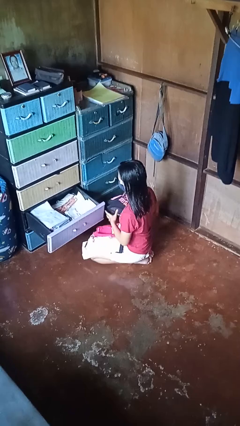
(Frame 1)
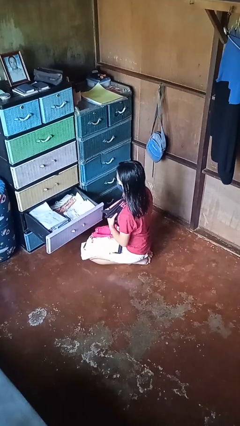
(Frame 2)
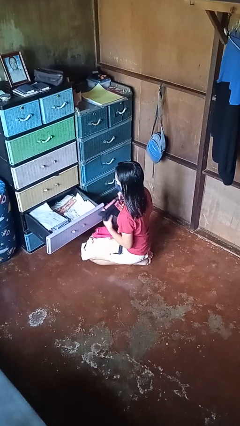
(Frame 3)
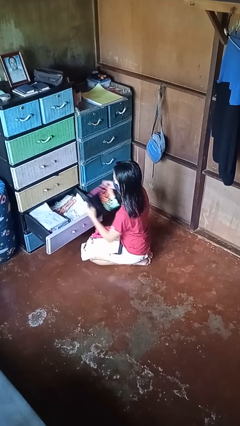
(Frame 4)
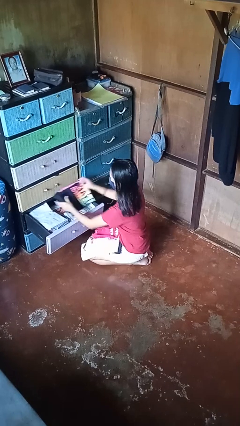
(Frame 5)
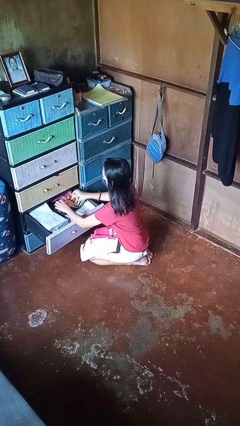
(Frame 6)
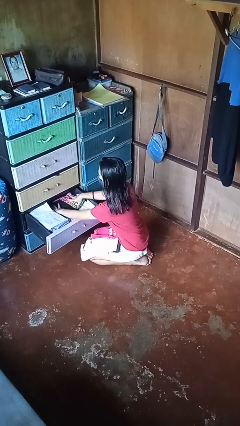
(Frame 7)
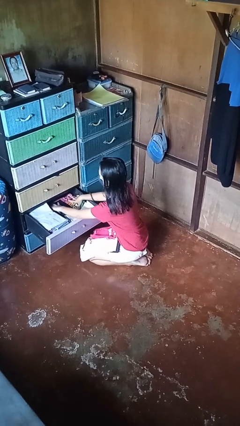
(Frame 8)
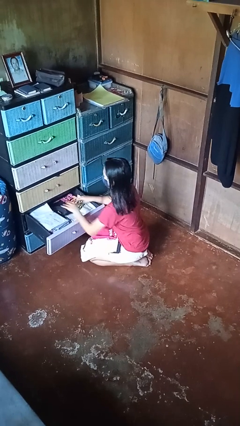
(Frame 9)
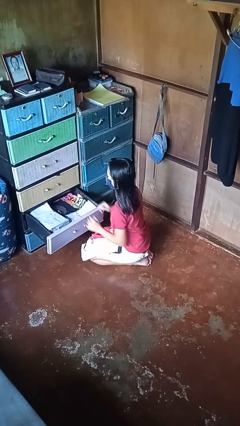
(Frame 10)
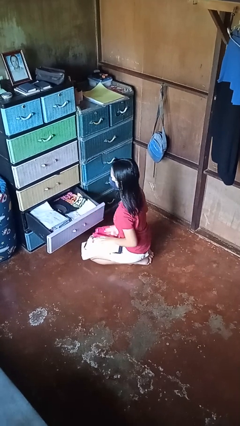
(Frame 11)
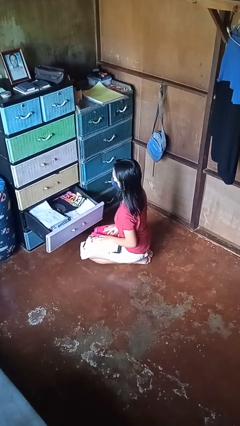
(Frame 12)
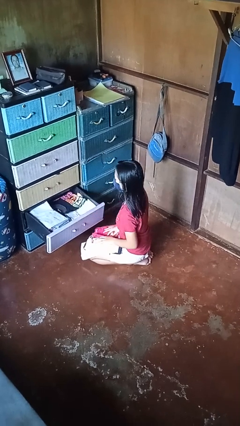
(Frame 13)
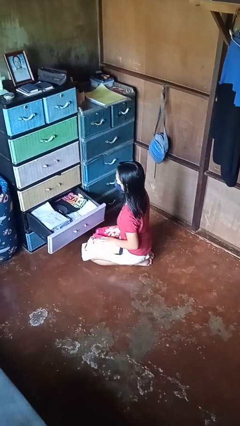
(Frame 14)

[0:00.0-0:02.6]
person puts clothes into dresser

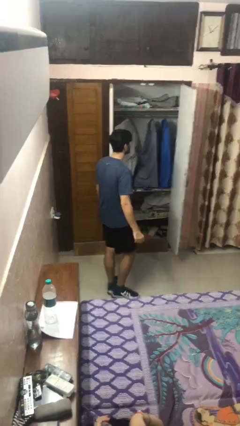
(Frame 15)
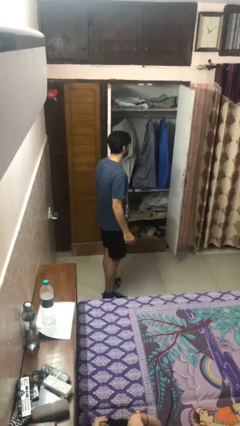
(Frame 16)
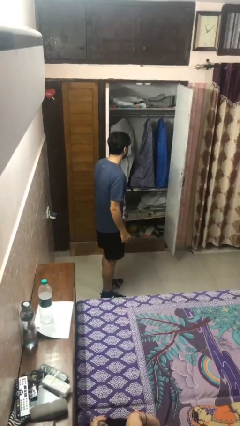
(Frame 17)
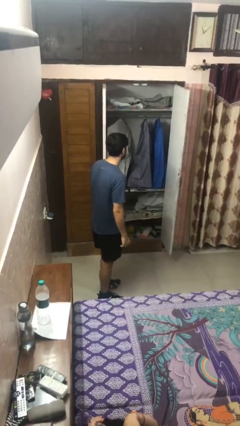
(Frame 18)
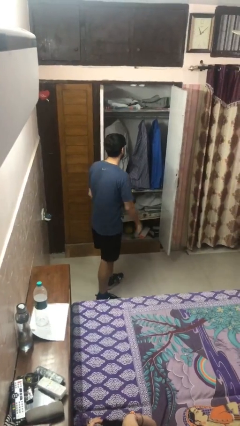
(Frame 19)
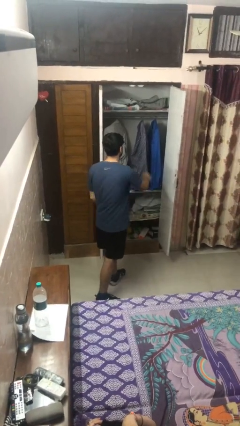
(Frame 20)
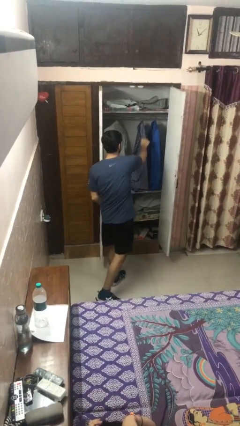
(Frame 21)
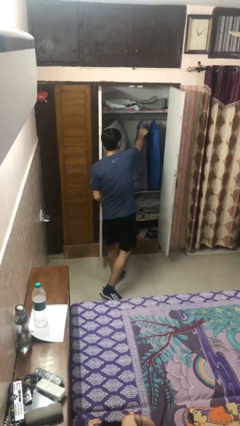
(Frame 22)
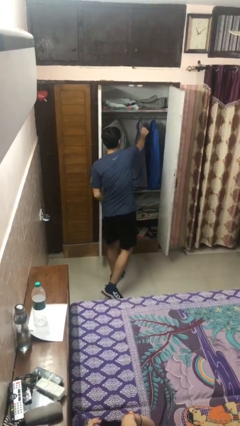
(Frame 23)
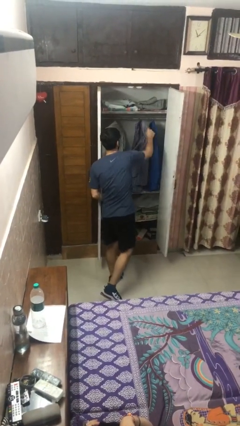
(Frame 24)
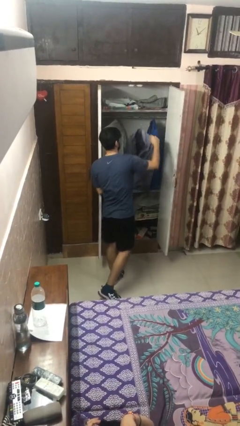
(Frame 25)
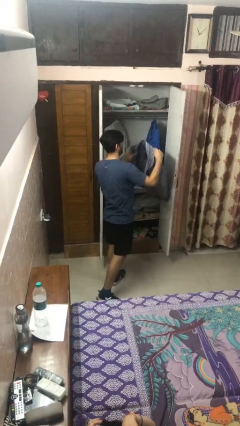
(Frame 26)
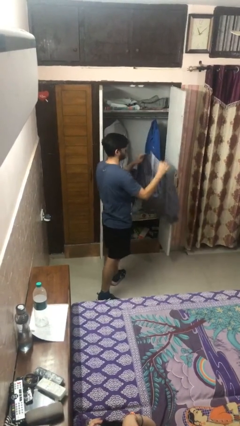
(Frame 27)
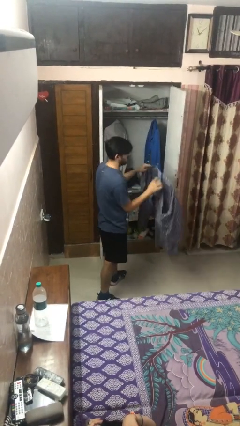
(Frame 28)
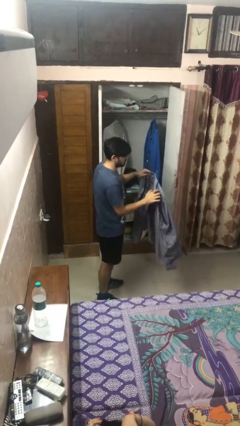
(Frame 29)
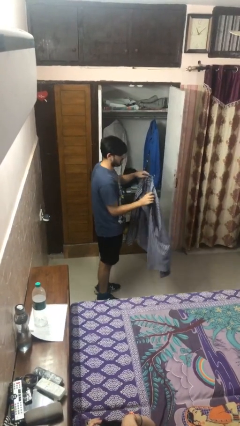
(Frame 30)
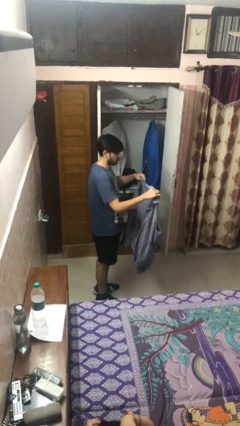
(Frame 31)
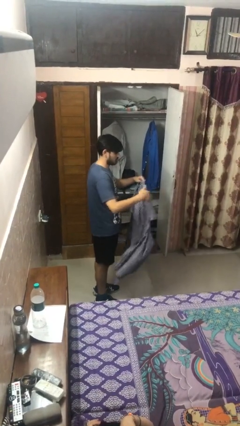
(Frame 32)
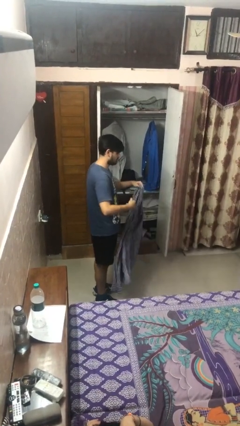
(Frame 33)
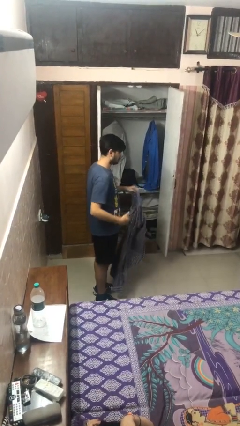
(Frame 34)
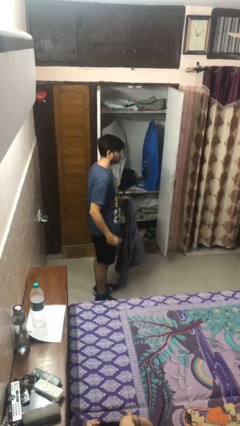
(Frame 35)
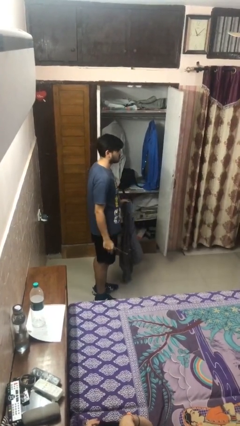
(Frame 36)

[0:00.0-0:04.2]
person takes clothes from closet

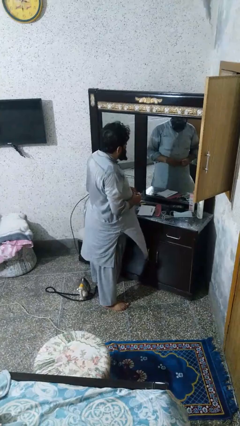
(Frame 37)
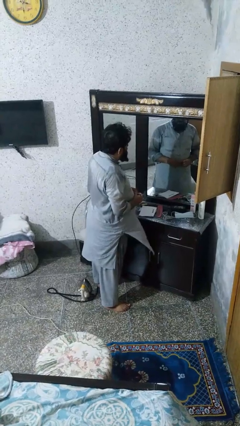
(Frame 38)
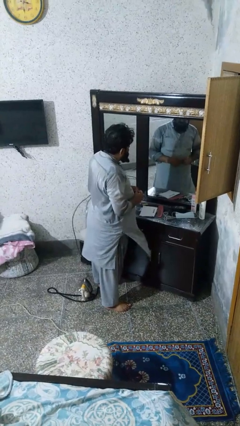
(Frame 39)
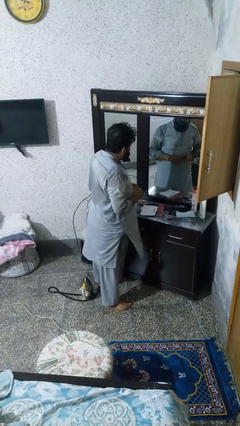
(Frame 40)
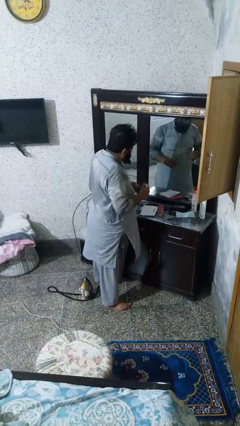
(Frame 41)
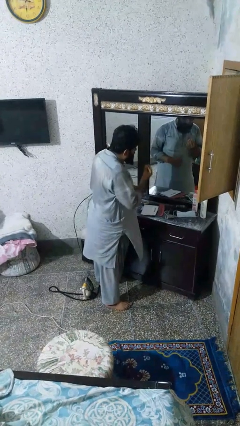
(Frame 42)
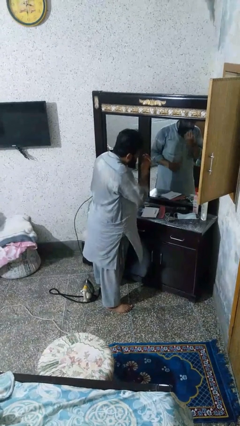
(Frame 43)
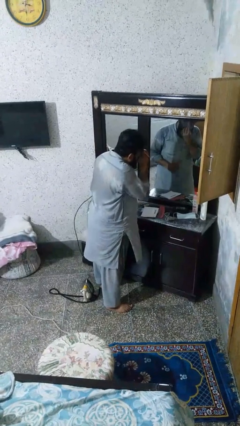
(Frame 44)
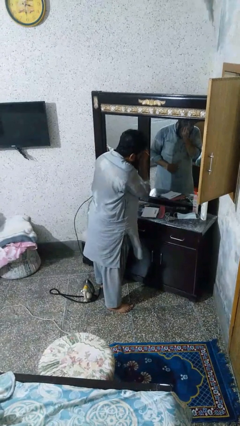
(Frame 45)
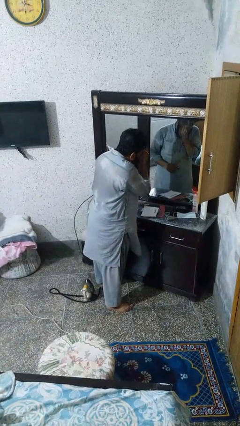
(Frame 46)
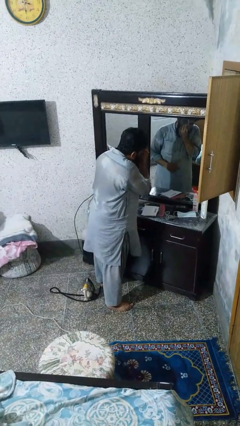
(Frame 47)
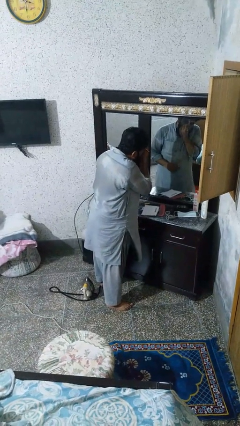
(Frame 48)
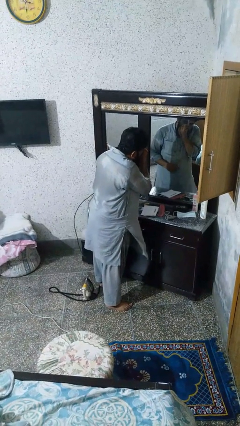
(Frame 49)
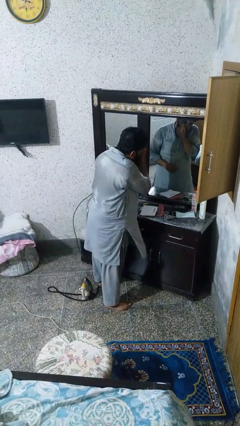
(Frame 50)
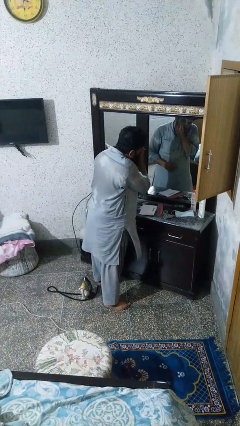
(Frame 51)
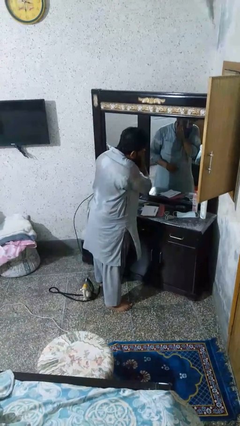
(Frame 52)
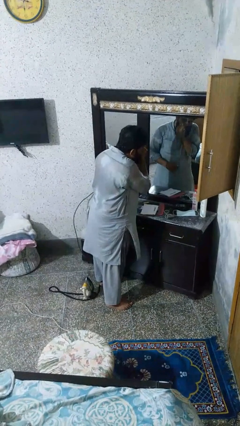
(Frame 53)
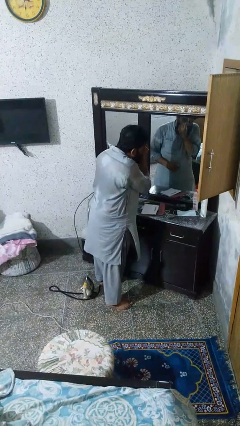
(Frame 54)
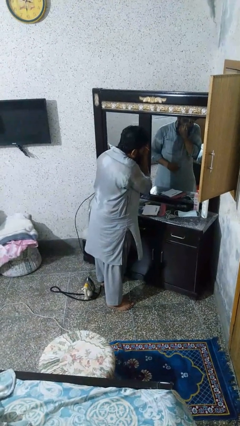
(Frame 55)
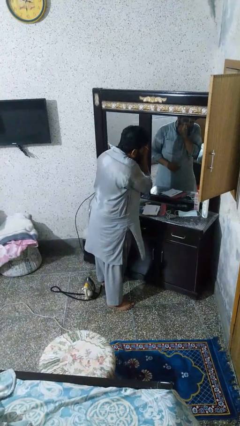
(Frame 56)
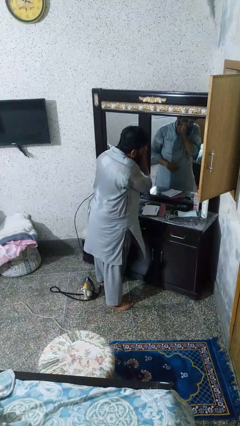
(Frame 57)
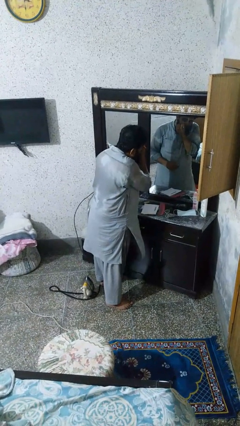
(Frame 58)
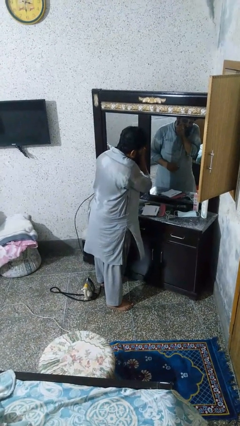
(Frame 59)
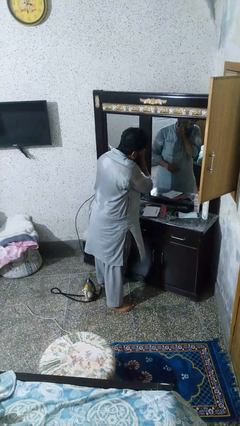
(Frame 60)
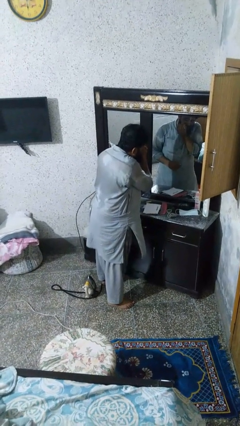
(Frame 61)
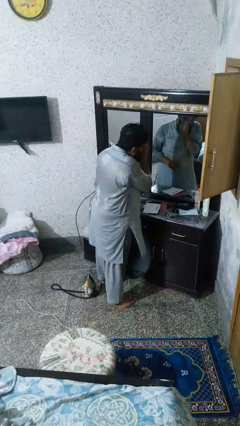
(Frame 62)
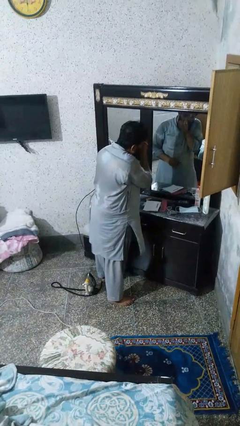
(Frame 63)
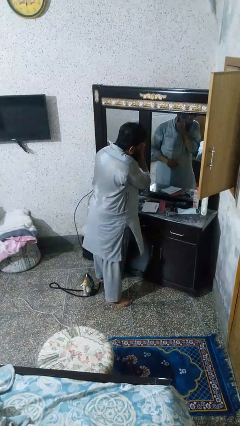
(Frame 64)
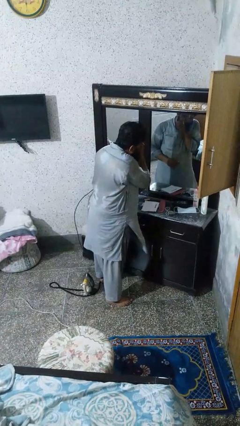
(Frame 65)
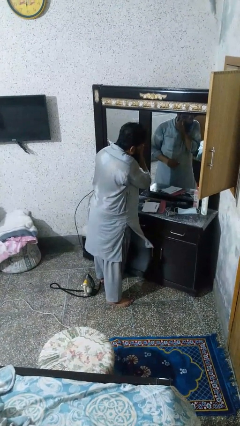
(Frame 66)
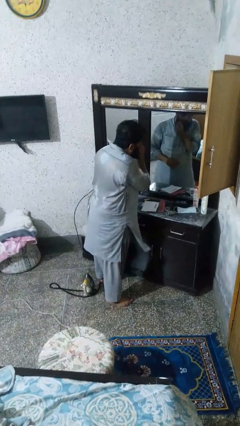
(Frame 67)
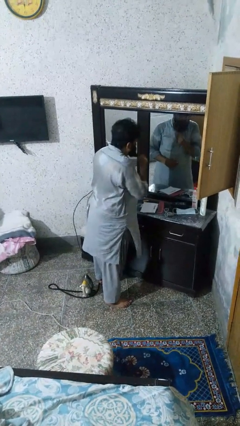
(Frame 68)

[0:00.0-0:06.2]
person applies eye makeup

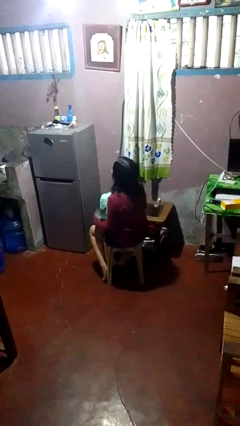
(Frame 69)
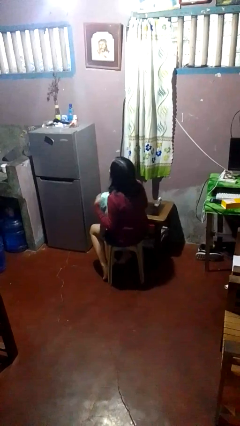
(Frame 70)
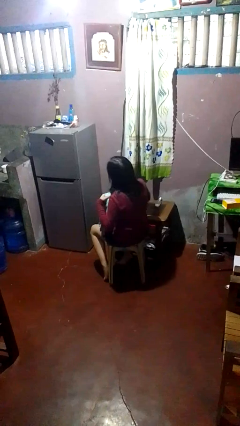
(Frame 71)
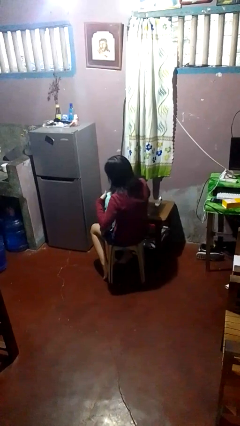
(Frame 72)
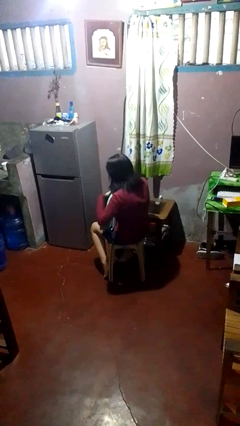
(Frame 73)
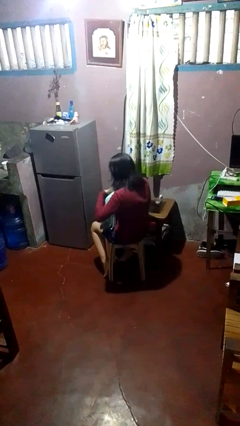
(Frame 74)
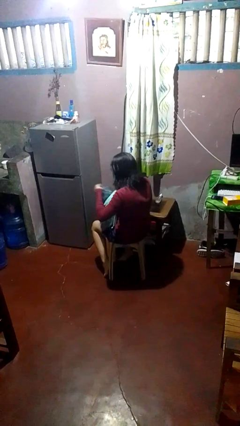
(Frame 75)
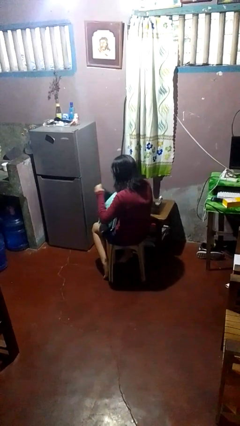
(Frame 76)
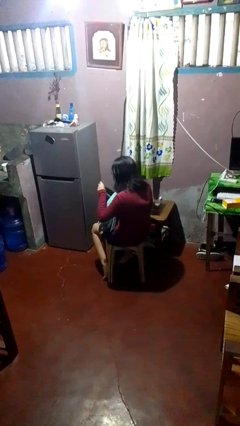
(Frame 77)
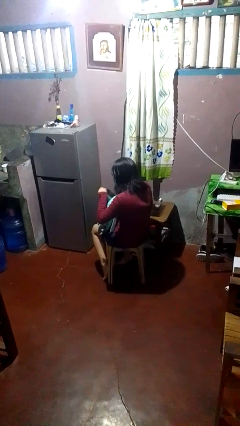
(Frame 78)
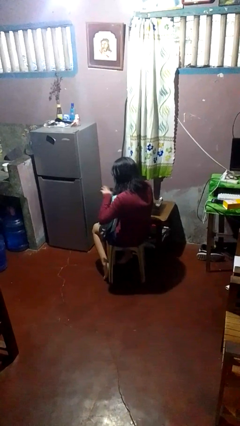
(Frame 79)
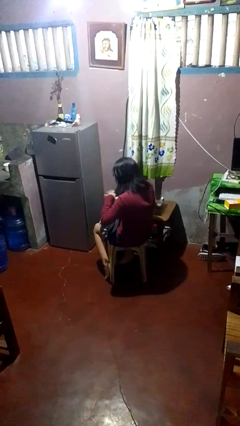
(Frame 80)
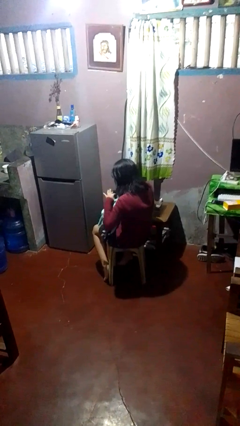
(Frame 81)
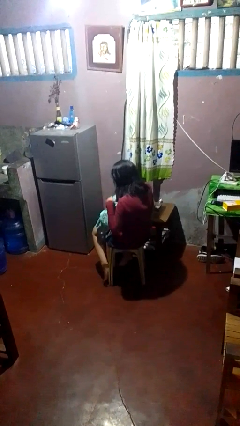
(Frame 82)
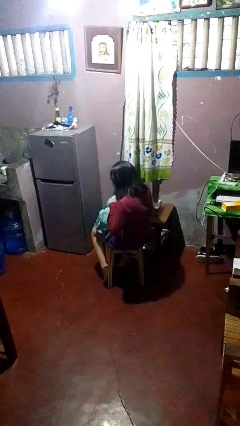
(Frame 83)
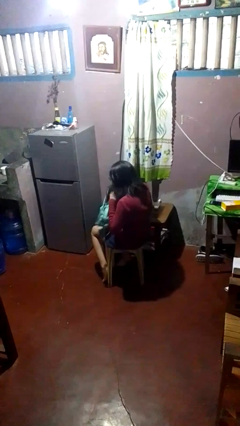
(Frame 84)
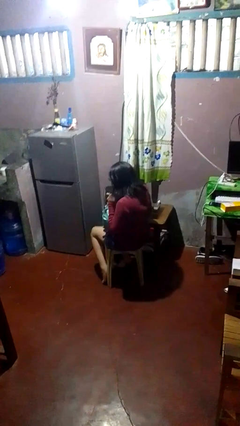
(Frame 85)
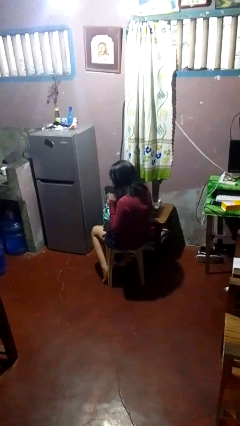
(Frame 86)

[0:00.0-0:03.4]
person searches in backpack

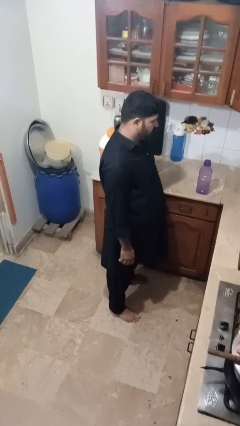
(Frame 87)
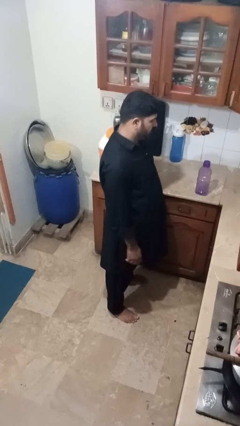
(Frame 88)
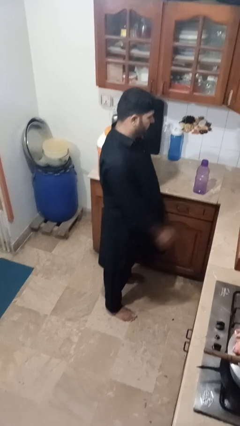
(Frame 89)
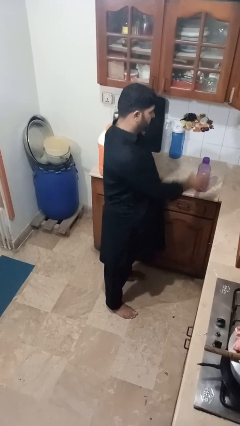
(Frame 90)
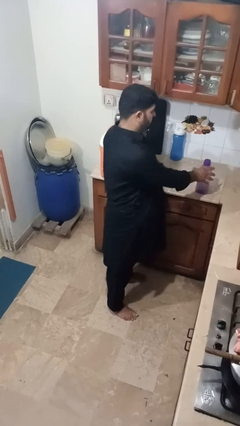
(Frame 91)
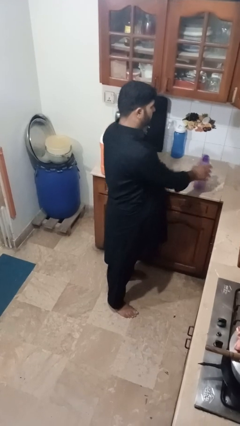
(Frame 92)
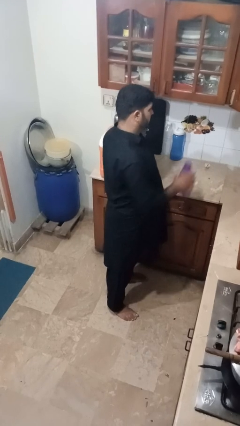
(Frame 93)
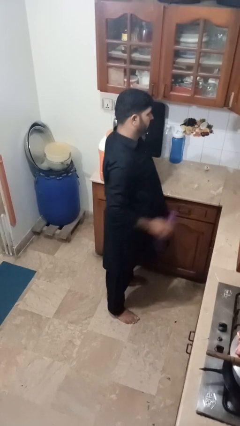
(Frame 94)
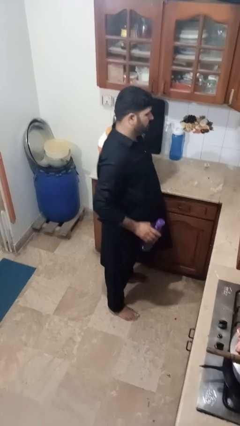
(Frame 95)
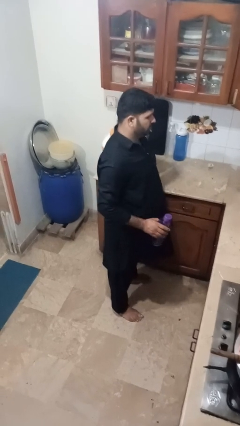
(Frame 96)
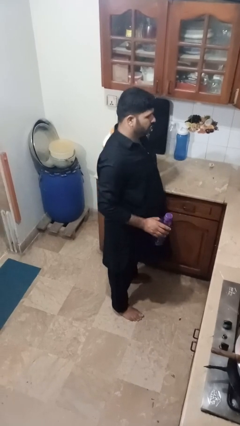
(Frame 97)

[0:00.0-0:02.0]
person picks up object from countertop
